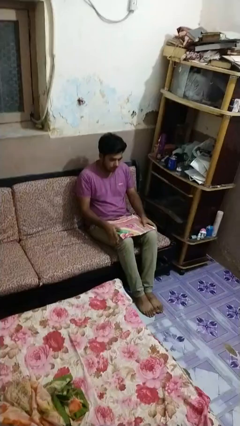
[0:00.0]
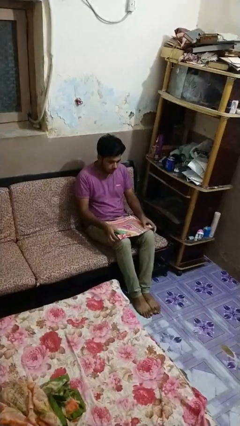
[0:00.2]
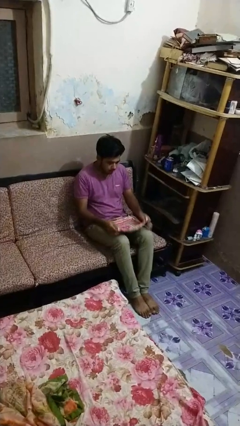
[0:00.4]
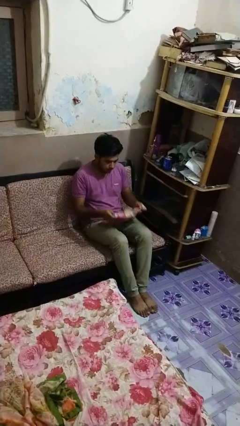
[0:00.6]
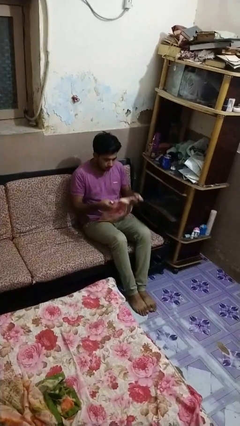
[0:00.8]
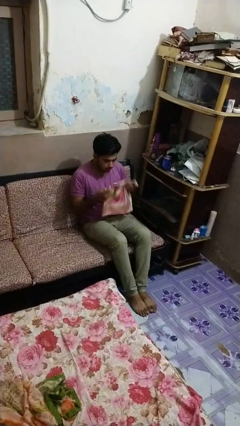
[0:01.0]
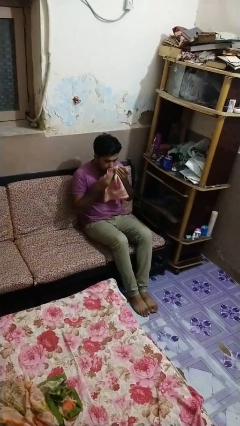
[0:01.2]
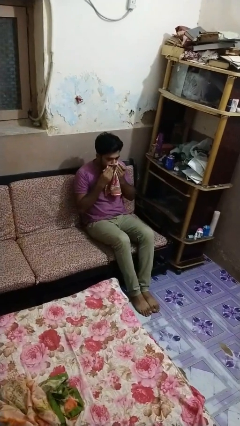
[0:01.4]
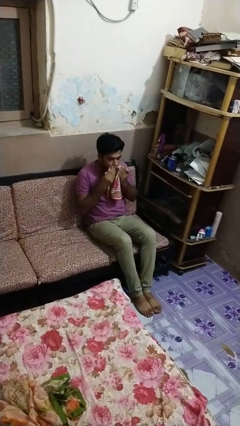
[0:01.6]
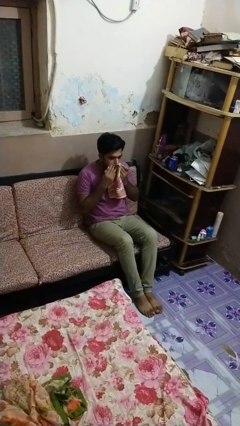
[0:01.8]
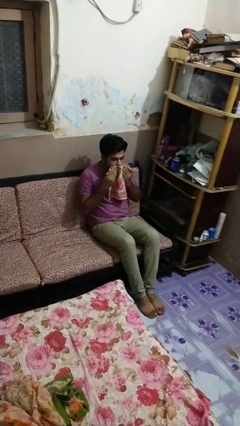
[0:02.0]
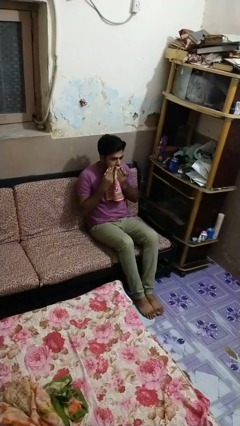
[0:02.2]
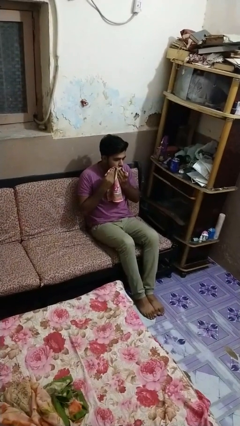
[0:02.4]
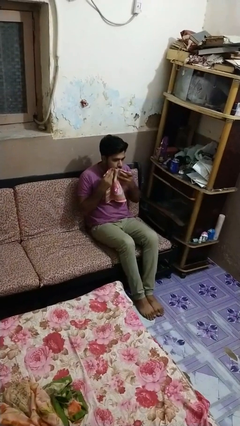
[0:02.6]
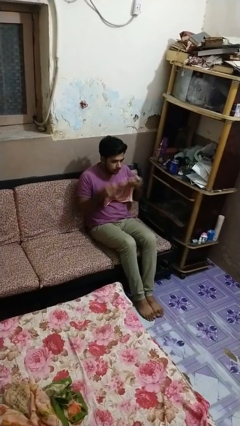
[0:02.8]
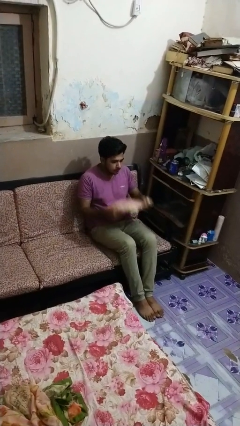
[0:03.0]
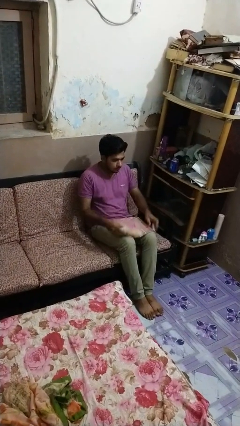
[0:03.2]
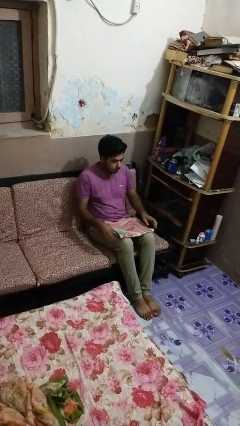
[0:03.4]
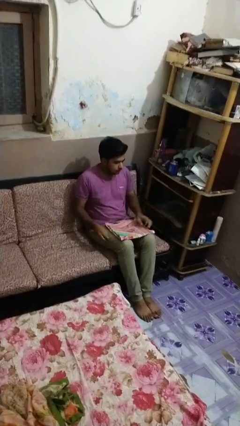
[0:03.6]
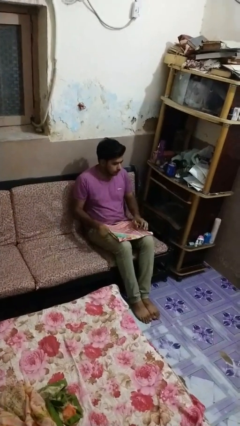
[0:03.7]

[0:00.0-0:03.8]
person wipes mouth with napkin

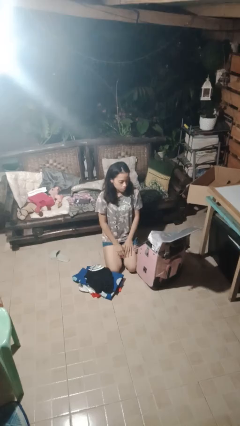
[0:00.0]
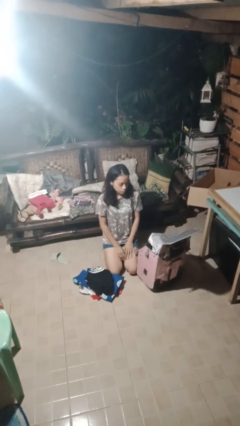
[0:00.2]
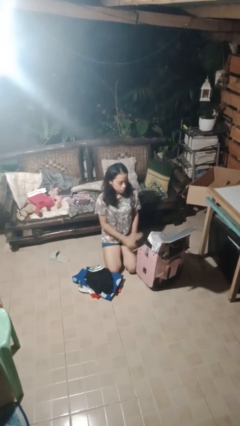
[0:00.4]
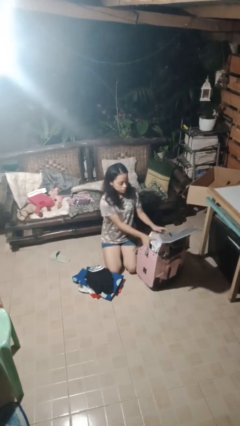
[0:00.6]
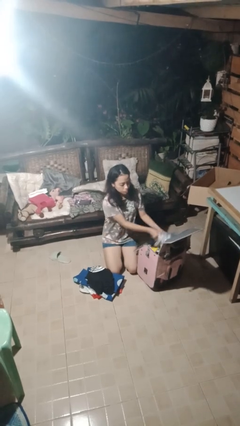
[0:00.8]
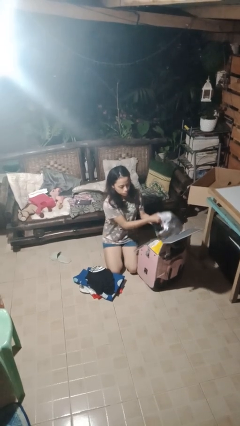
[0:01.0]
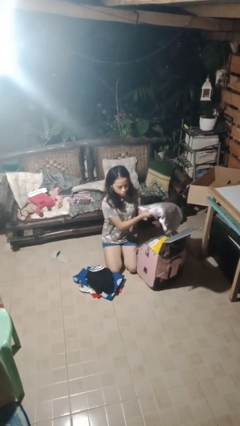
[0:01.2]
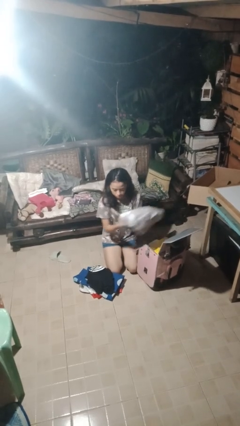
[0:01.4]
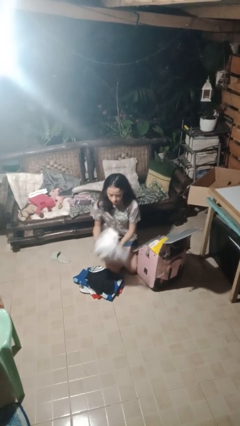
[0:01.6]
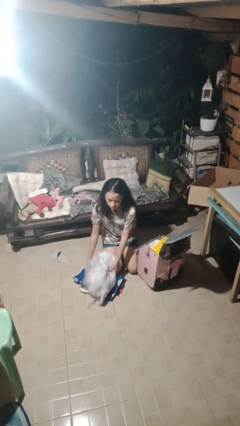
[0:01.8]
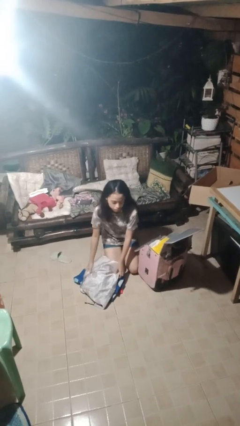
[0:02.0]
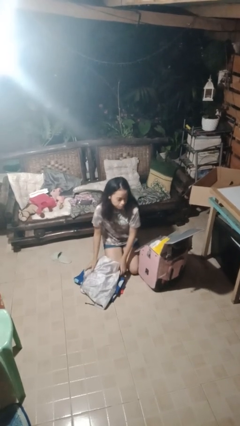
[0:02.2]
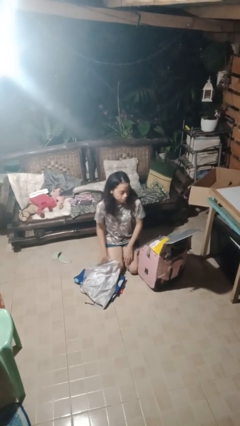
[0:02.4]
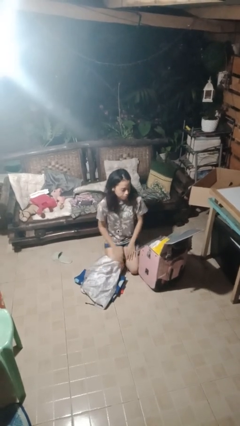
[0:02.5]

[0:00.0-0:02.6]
person unloads clothes from suitcase

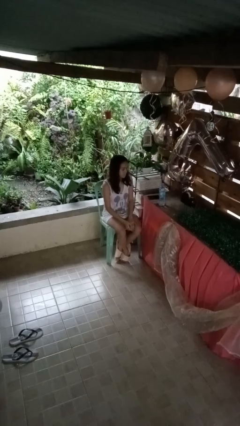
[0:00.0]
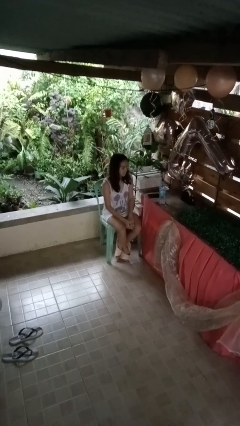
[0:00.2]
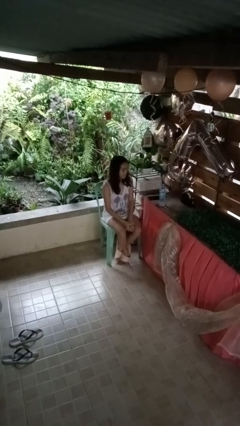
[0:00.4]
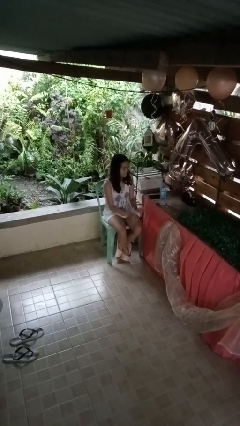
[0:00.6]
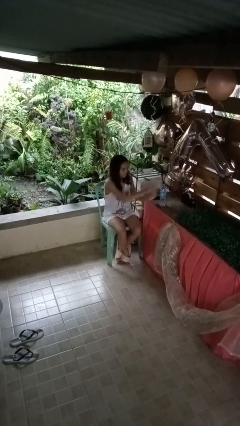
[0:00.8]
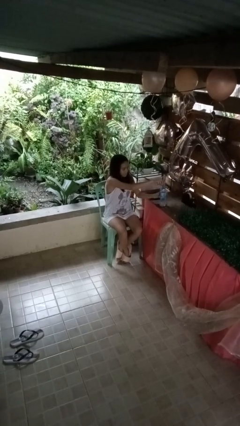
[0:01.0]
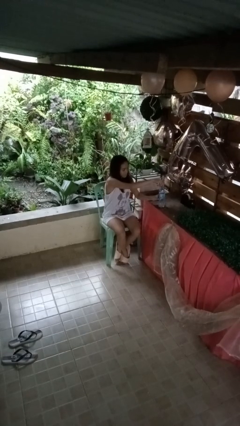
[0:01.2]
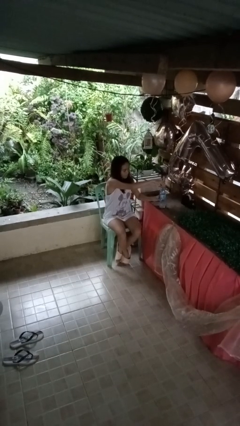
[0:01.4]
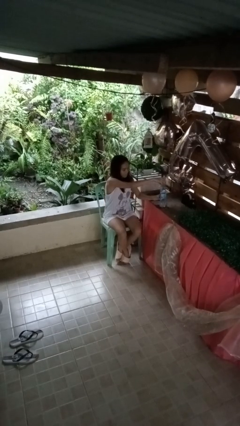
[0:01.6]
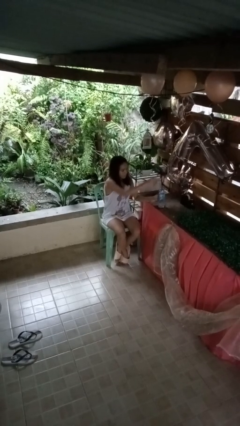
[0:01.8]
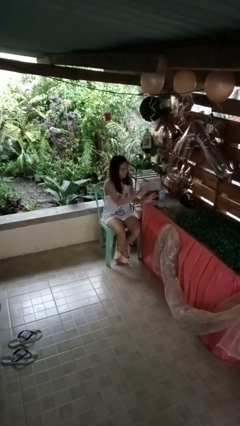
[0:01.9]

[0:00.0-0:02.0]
person unscrews lid from bottle

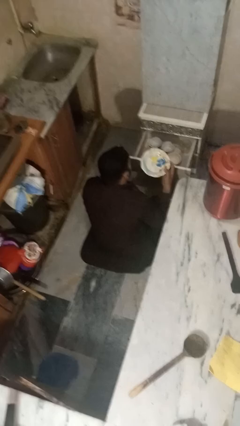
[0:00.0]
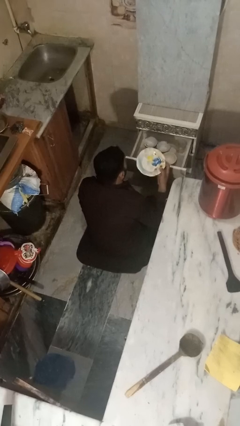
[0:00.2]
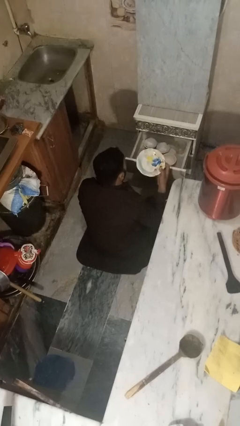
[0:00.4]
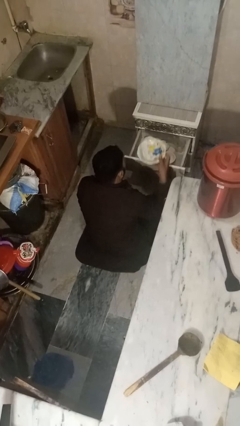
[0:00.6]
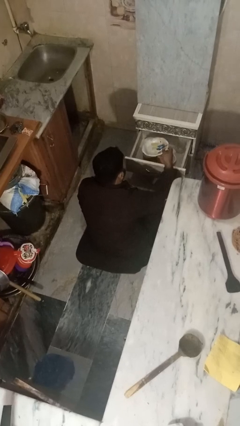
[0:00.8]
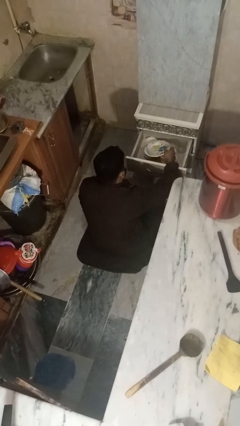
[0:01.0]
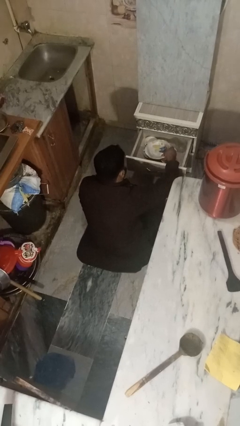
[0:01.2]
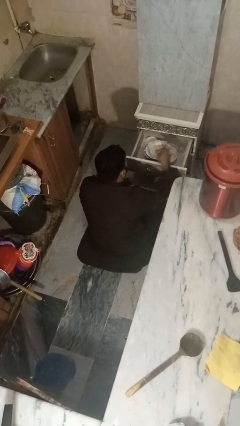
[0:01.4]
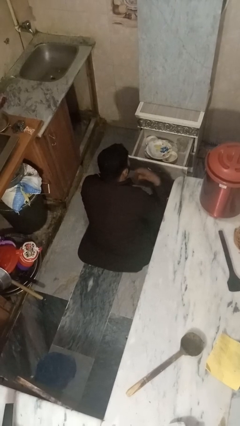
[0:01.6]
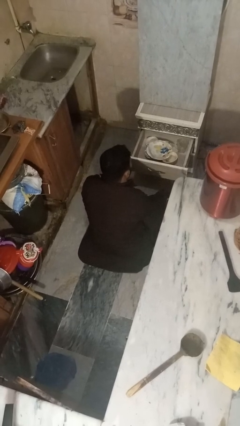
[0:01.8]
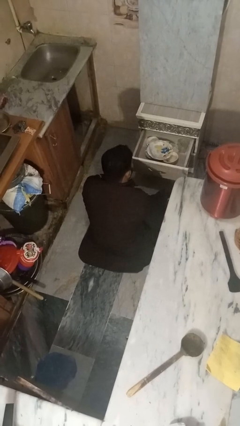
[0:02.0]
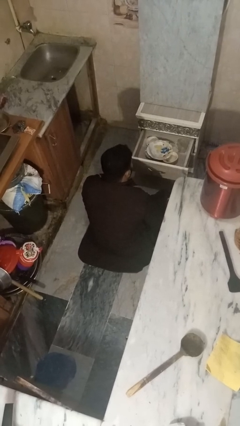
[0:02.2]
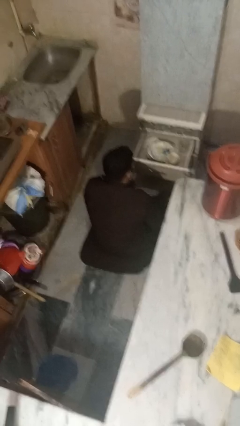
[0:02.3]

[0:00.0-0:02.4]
person puts object into kitchen drawer

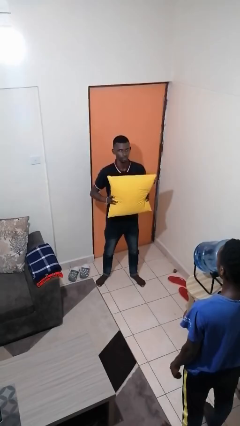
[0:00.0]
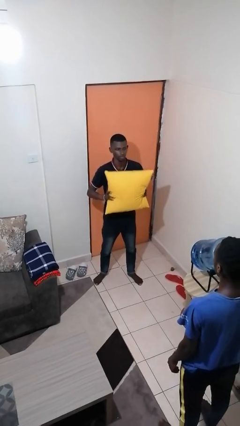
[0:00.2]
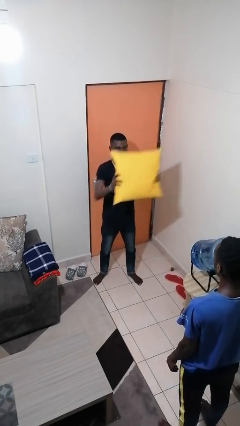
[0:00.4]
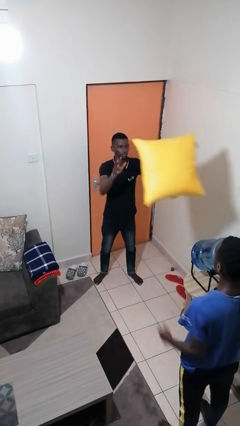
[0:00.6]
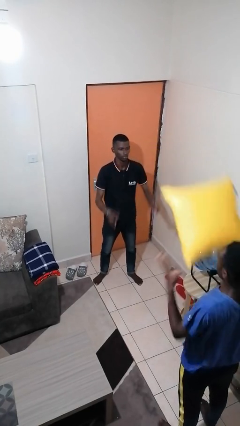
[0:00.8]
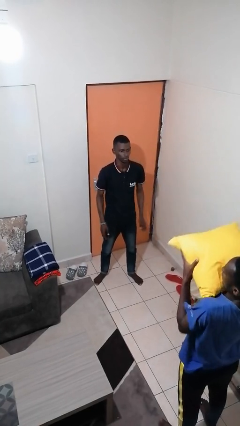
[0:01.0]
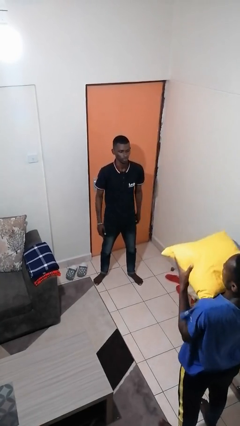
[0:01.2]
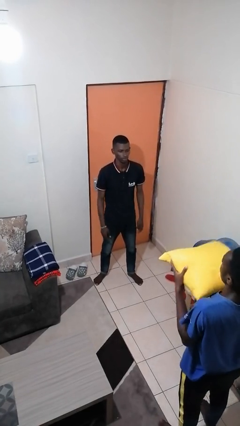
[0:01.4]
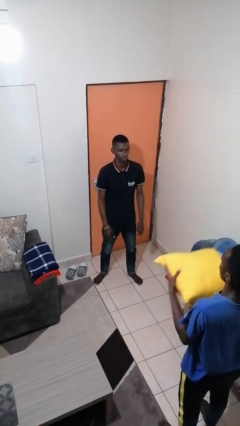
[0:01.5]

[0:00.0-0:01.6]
person throws object to person

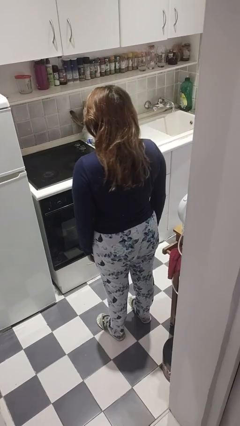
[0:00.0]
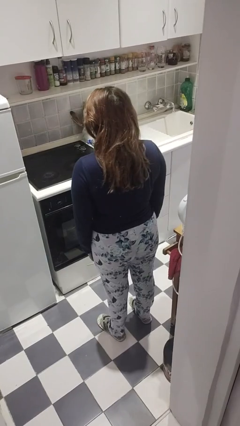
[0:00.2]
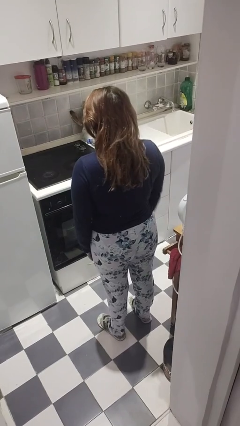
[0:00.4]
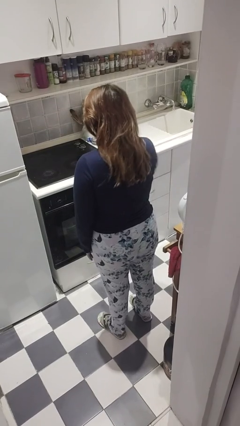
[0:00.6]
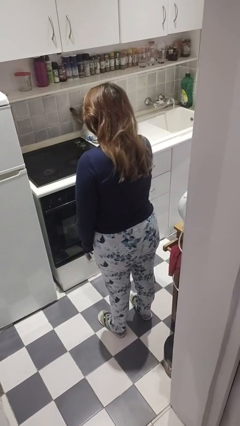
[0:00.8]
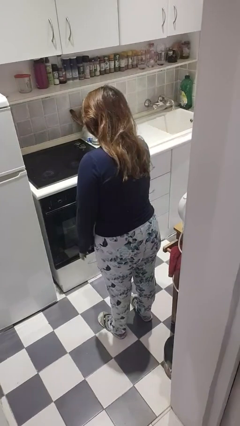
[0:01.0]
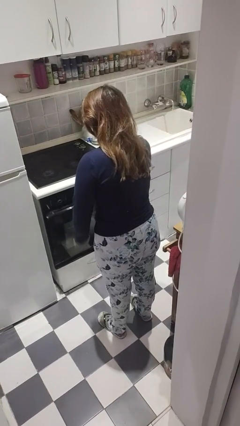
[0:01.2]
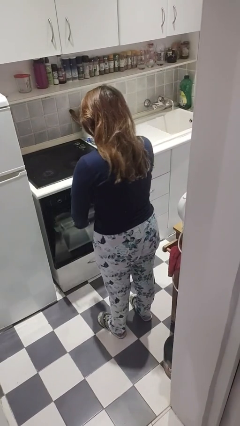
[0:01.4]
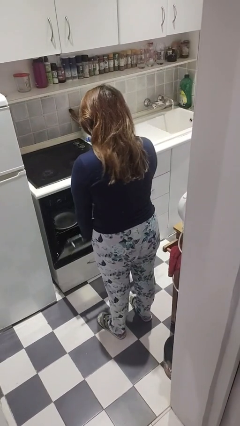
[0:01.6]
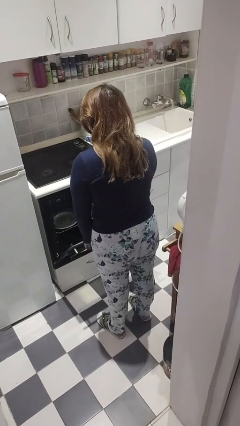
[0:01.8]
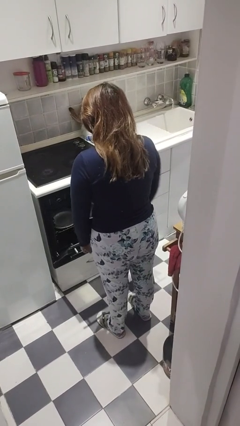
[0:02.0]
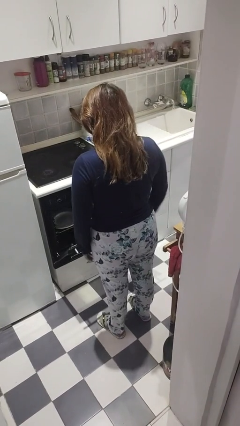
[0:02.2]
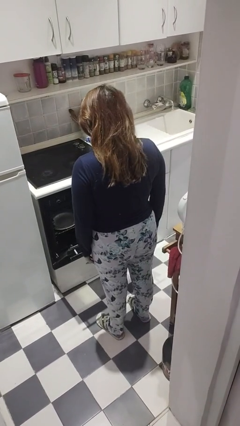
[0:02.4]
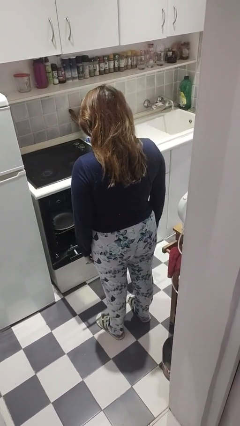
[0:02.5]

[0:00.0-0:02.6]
person opens dishwasher

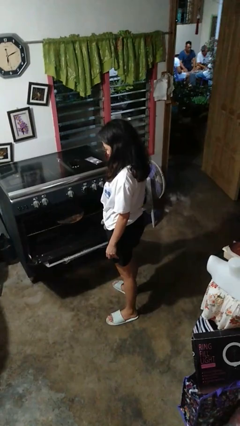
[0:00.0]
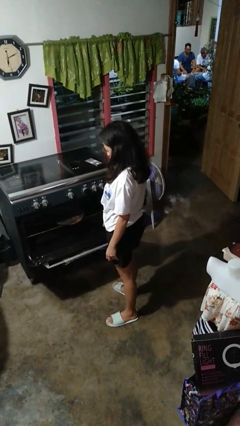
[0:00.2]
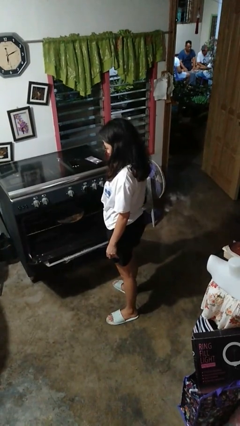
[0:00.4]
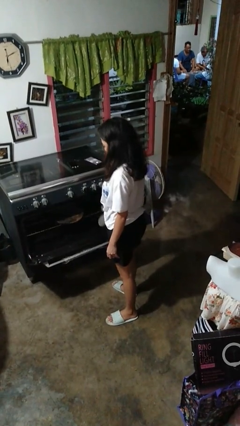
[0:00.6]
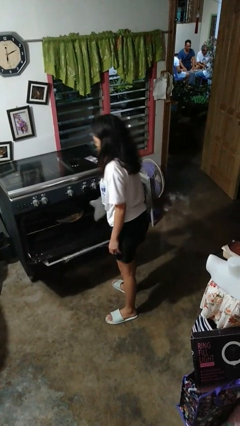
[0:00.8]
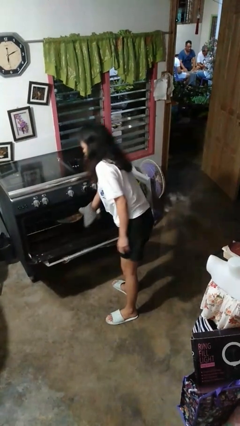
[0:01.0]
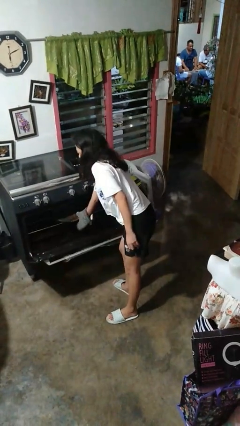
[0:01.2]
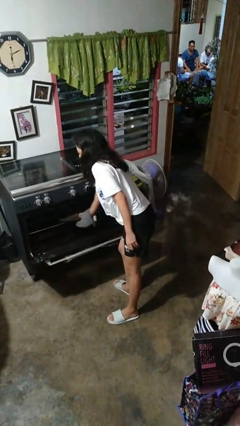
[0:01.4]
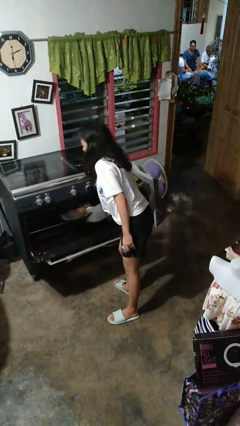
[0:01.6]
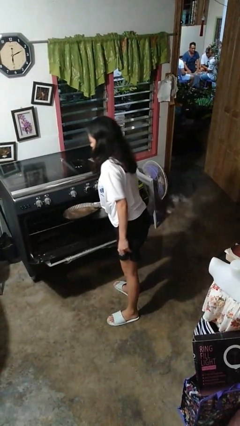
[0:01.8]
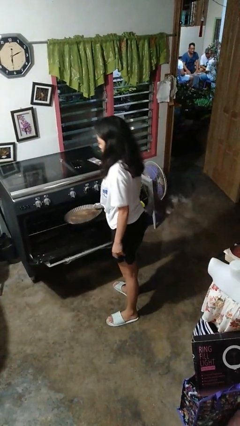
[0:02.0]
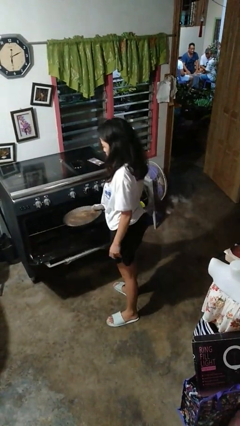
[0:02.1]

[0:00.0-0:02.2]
person takes object from oven
